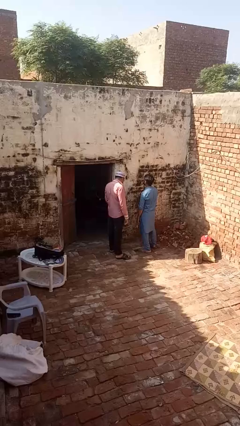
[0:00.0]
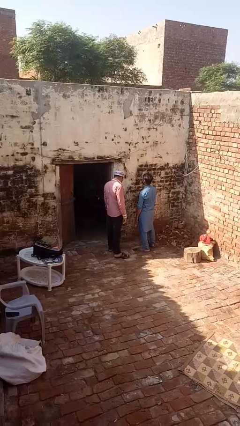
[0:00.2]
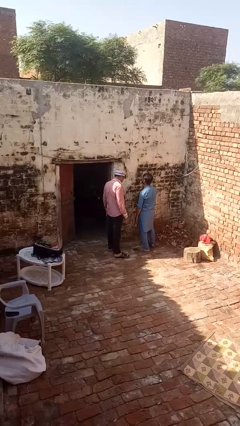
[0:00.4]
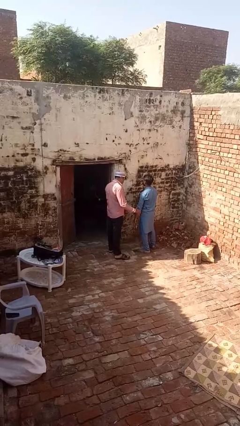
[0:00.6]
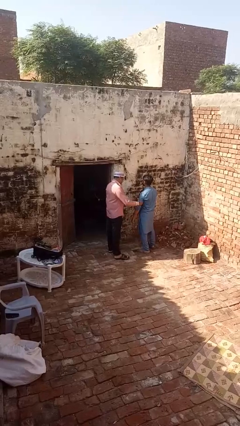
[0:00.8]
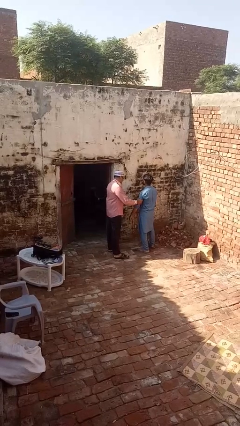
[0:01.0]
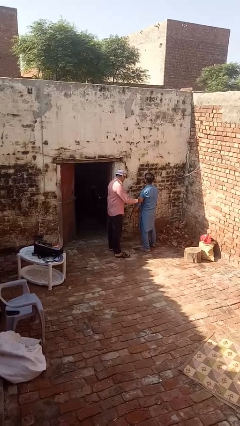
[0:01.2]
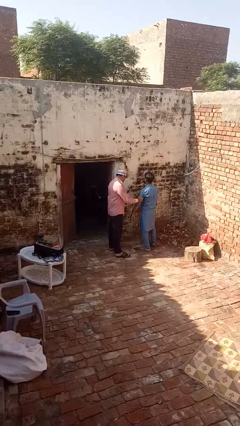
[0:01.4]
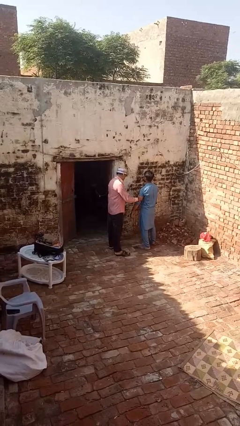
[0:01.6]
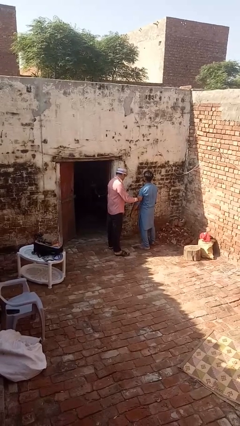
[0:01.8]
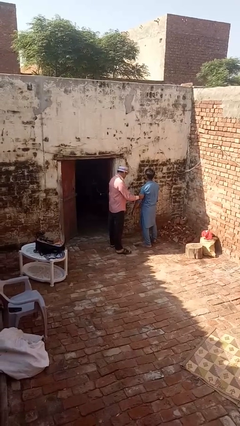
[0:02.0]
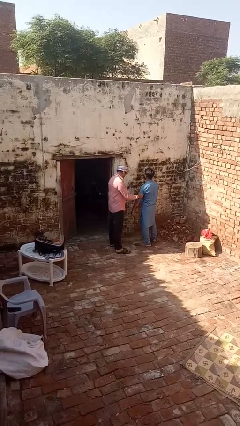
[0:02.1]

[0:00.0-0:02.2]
person grabs person by bicep

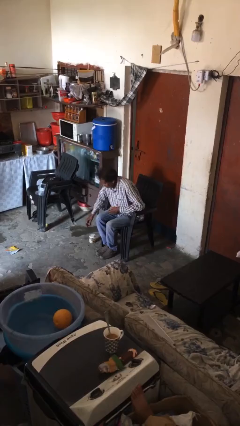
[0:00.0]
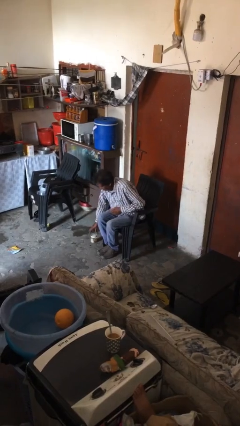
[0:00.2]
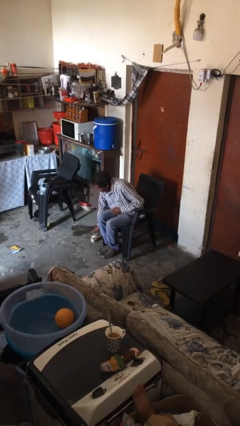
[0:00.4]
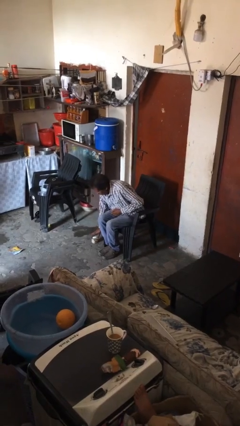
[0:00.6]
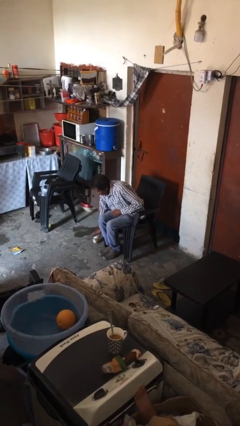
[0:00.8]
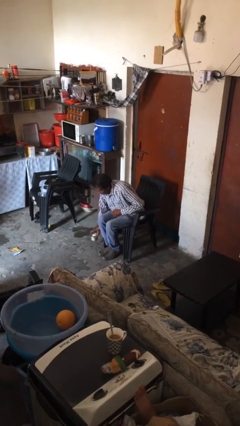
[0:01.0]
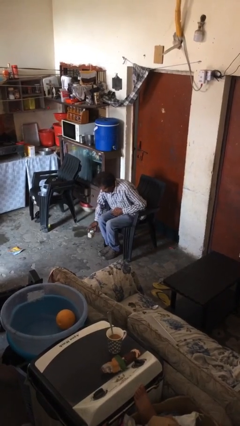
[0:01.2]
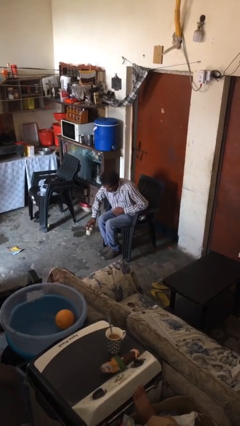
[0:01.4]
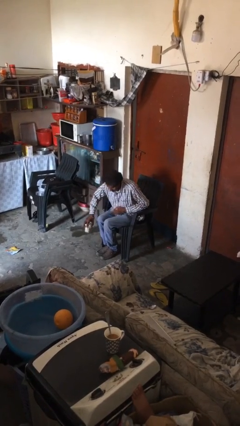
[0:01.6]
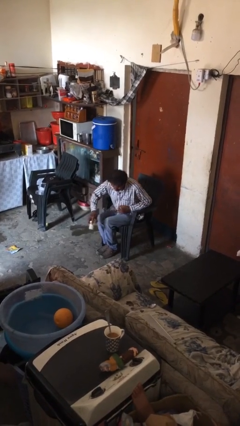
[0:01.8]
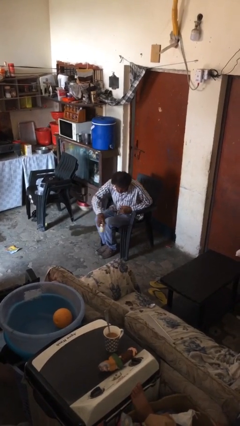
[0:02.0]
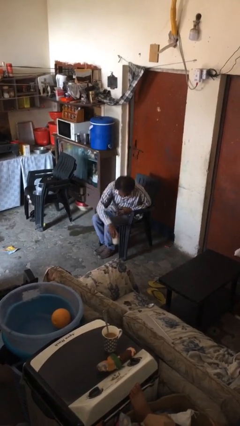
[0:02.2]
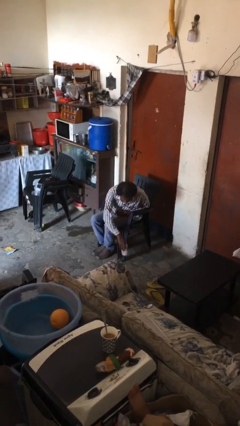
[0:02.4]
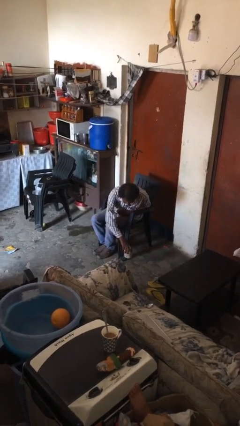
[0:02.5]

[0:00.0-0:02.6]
person picks up object from floor

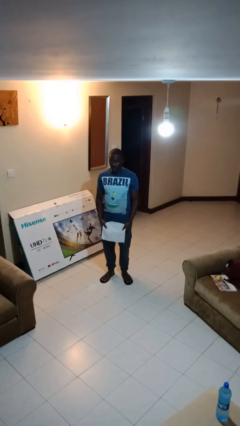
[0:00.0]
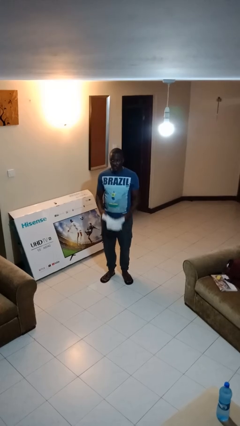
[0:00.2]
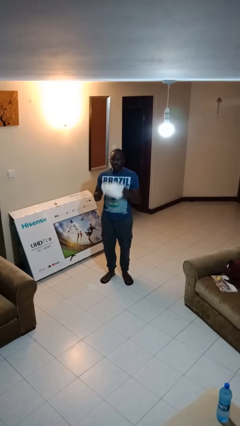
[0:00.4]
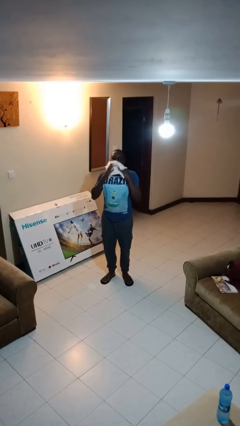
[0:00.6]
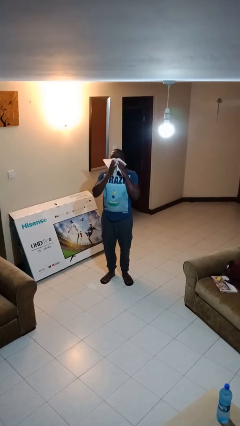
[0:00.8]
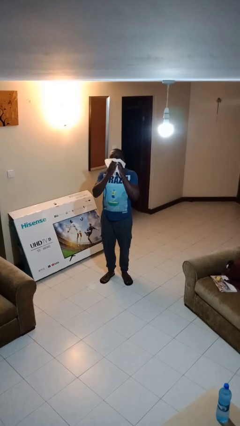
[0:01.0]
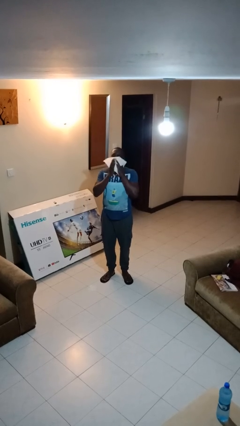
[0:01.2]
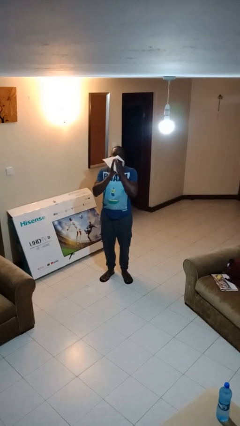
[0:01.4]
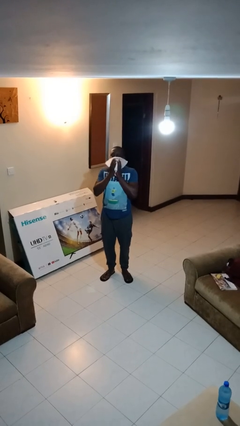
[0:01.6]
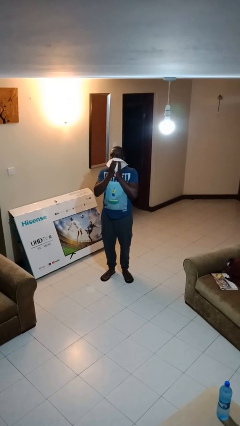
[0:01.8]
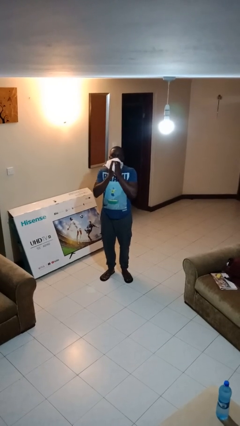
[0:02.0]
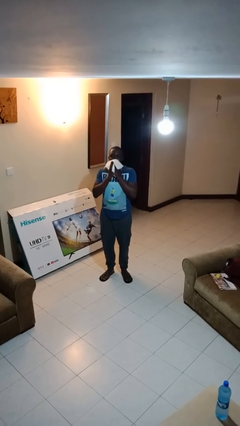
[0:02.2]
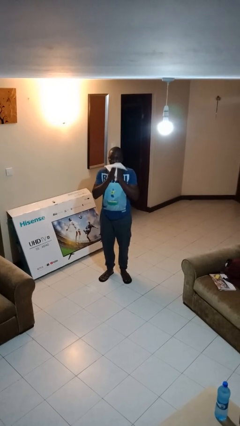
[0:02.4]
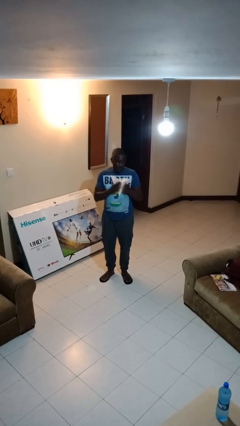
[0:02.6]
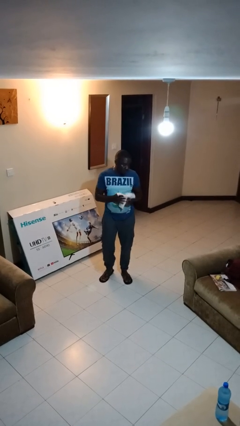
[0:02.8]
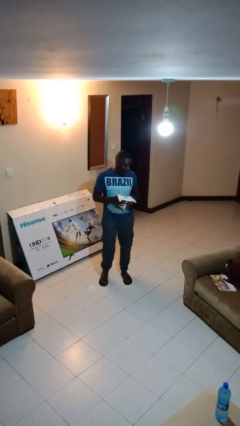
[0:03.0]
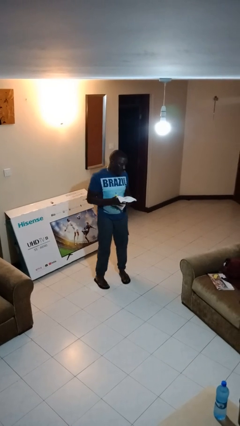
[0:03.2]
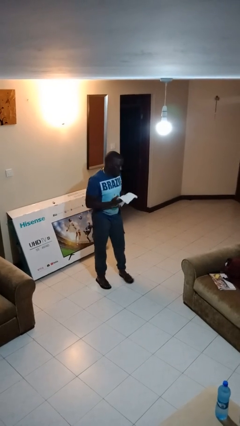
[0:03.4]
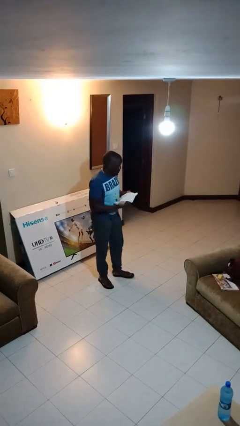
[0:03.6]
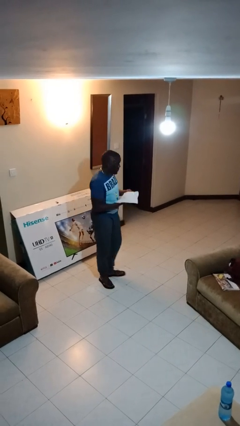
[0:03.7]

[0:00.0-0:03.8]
person wipes mouth with napkin

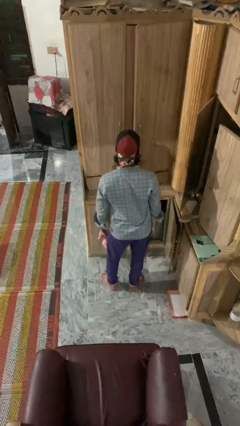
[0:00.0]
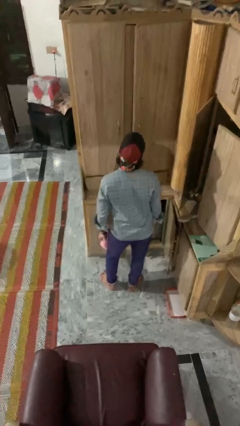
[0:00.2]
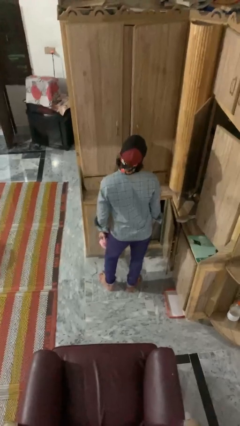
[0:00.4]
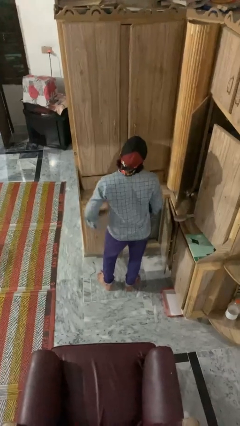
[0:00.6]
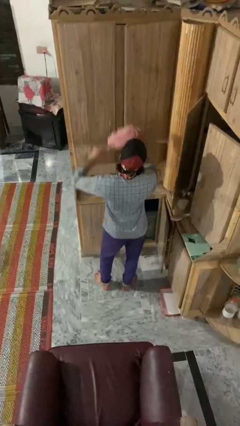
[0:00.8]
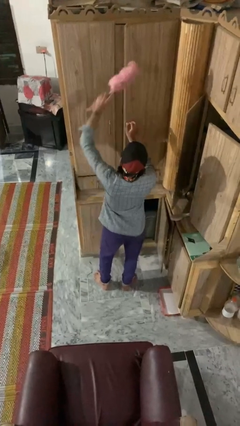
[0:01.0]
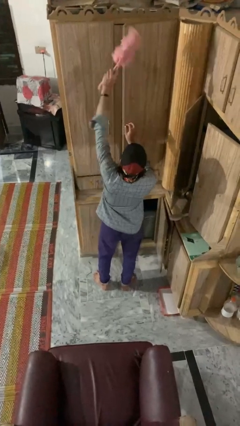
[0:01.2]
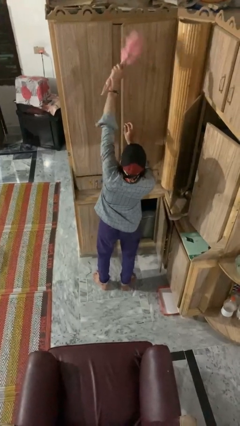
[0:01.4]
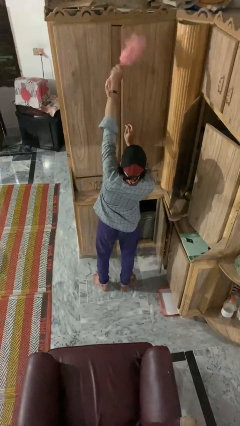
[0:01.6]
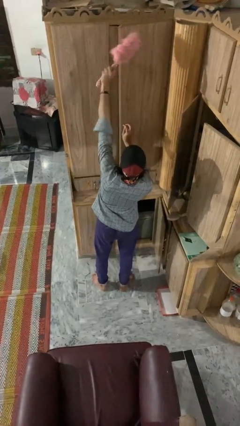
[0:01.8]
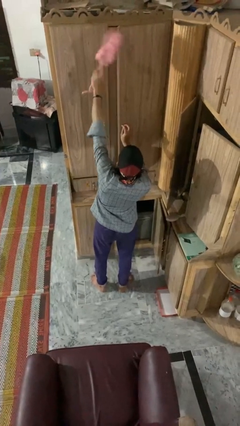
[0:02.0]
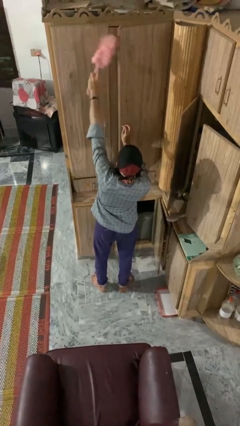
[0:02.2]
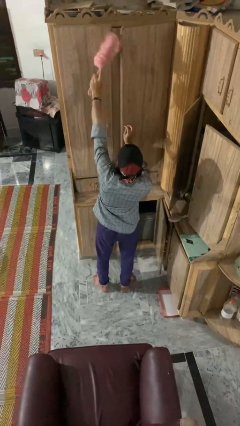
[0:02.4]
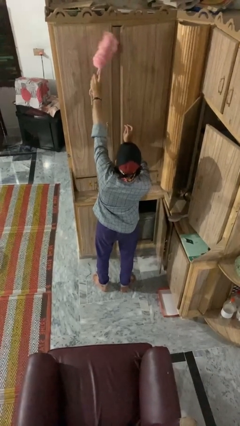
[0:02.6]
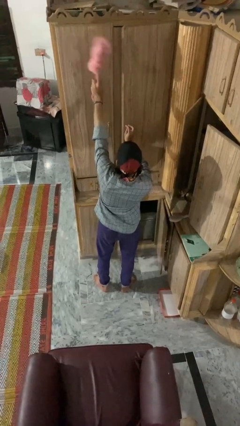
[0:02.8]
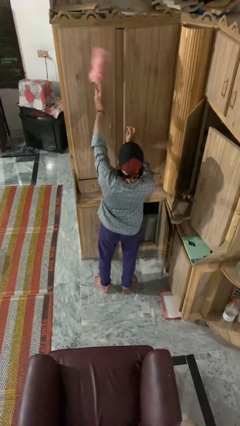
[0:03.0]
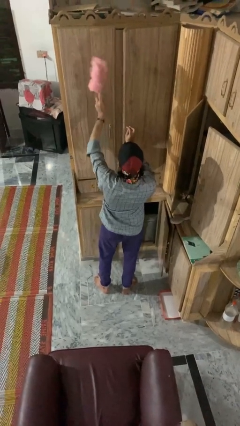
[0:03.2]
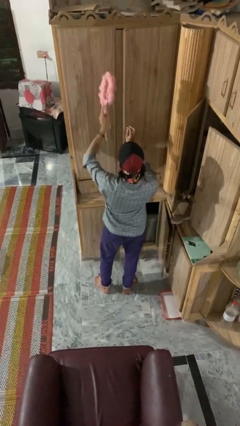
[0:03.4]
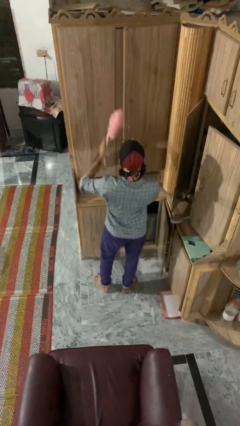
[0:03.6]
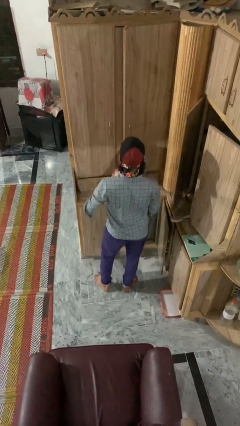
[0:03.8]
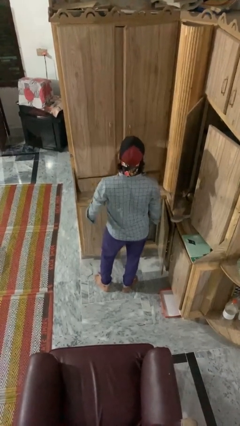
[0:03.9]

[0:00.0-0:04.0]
person dusts furniture

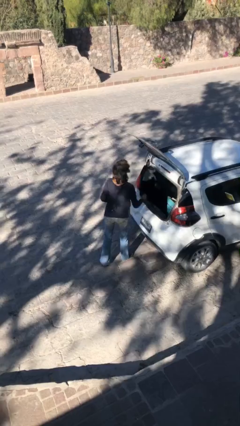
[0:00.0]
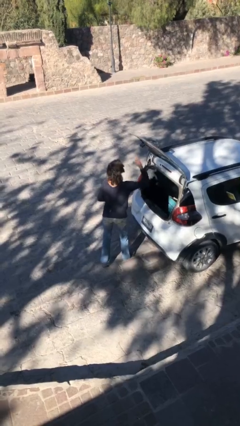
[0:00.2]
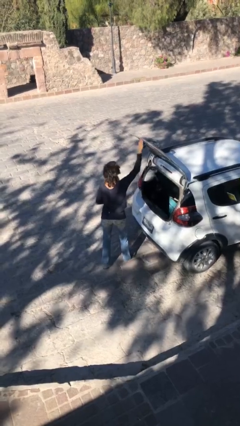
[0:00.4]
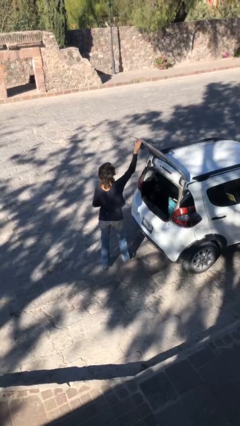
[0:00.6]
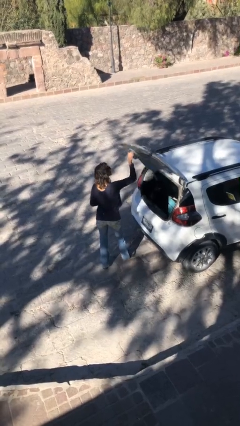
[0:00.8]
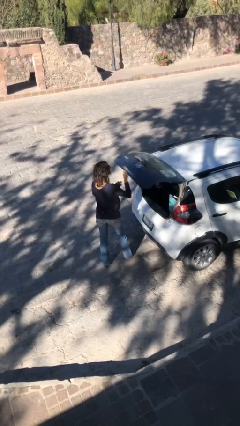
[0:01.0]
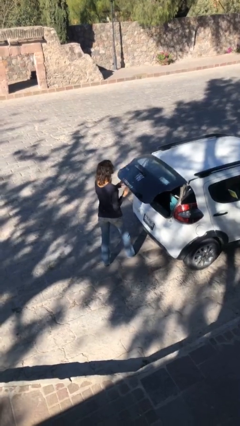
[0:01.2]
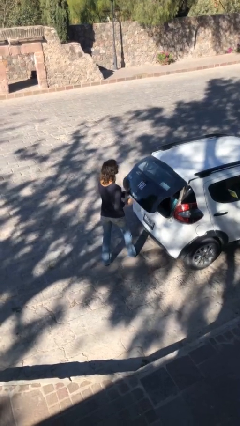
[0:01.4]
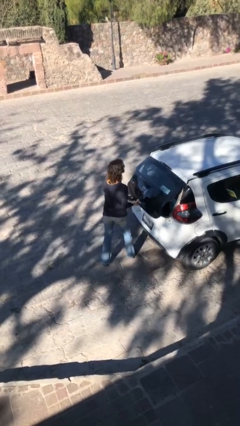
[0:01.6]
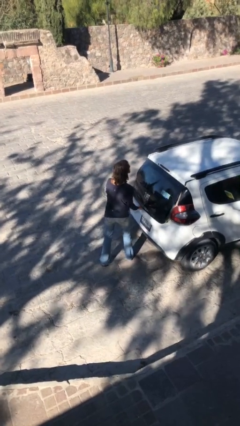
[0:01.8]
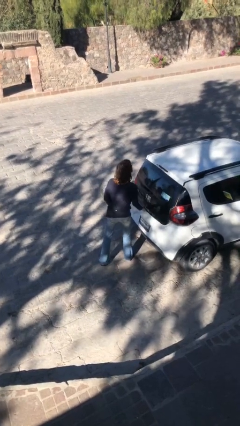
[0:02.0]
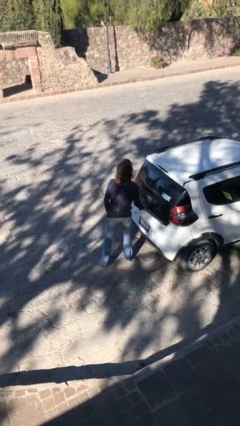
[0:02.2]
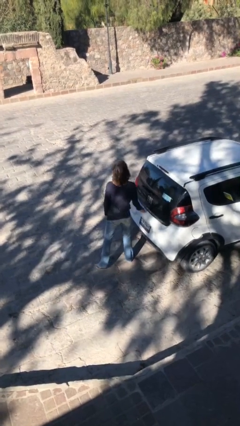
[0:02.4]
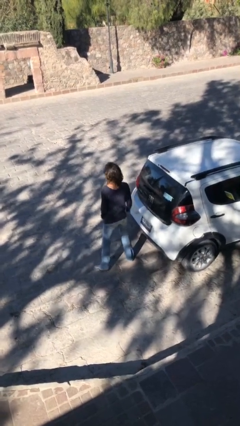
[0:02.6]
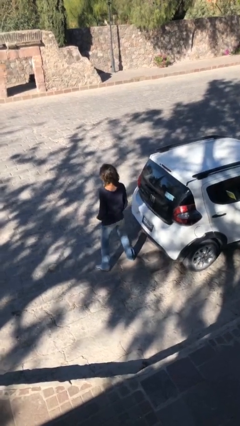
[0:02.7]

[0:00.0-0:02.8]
person closes car trunk

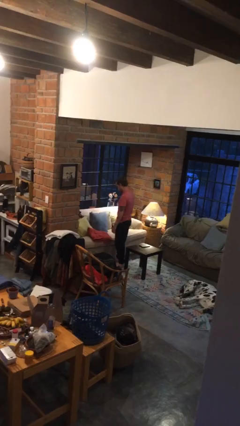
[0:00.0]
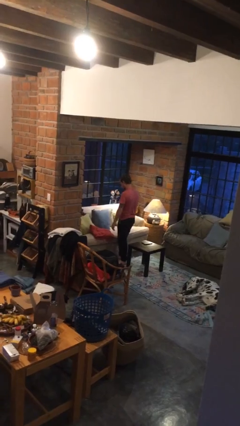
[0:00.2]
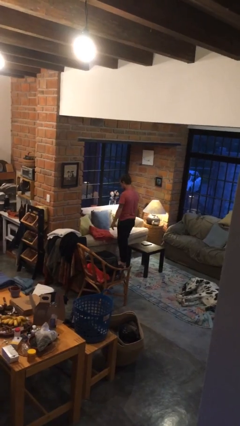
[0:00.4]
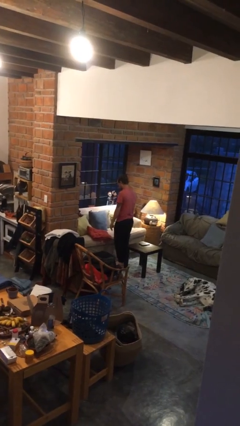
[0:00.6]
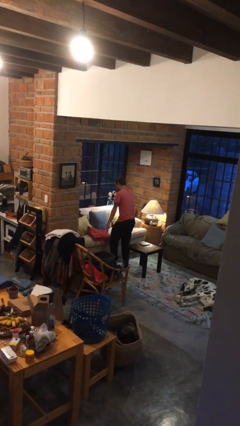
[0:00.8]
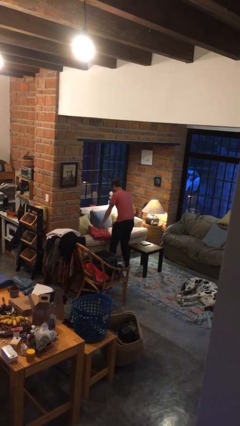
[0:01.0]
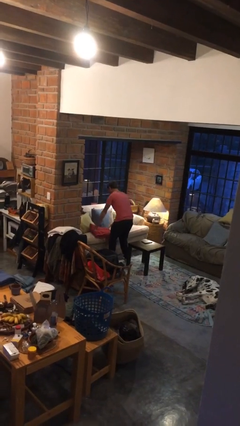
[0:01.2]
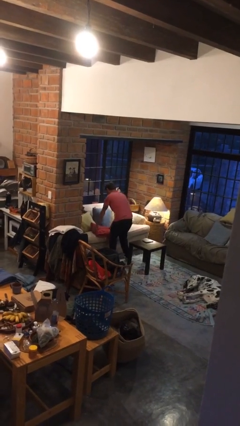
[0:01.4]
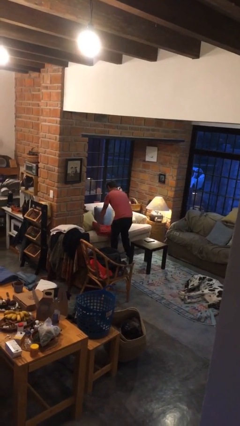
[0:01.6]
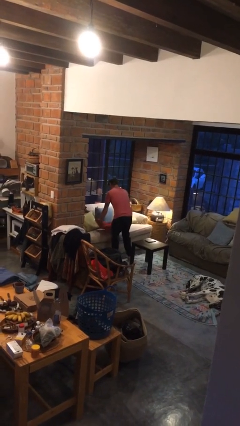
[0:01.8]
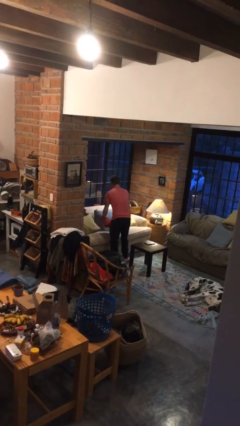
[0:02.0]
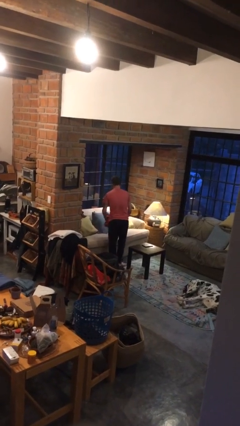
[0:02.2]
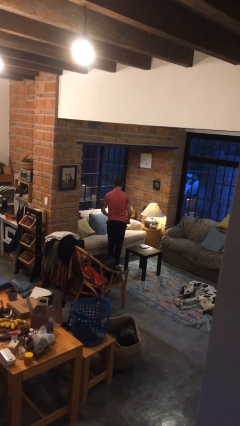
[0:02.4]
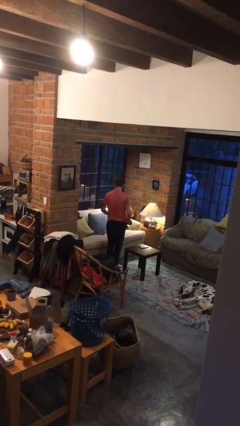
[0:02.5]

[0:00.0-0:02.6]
person picks up object from couch
